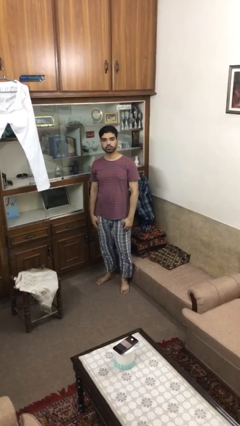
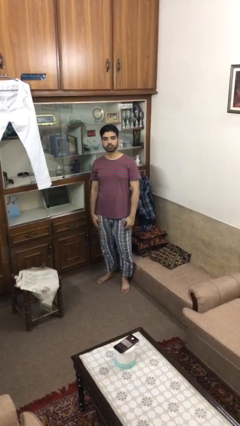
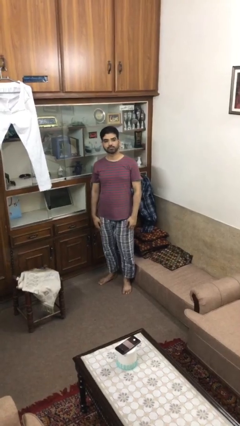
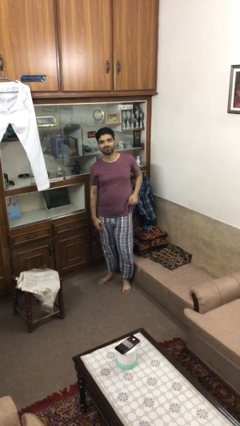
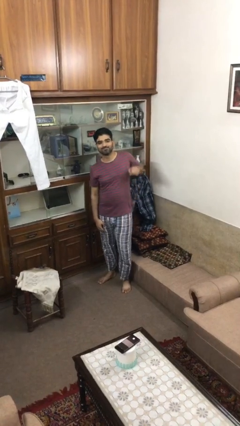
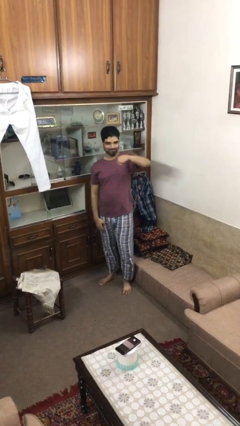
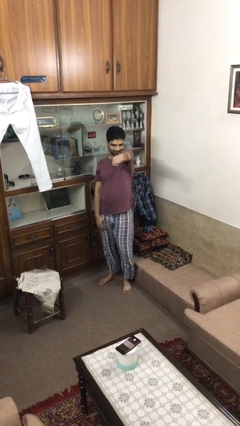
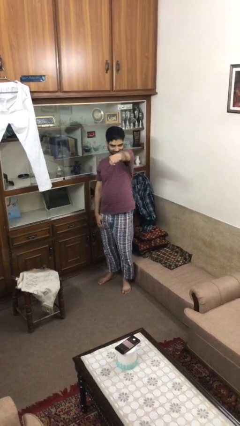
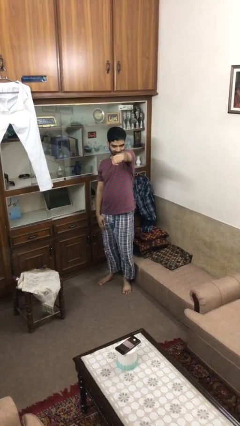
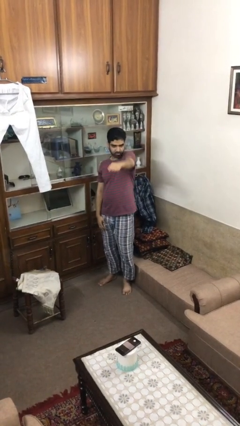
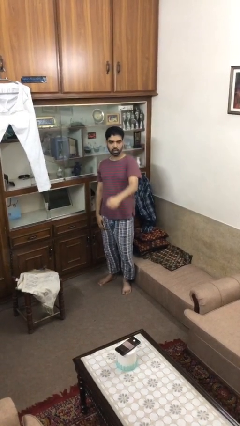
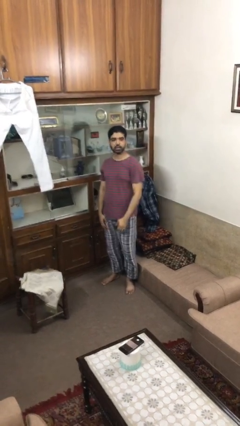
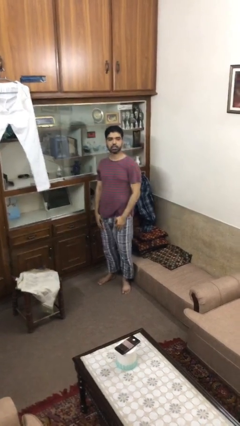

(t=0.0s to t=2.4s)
person punches

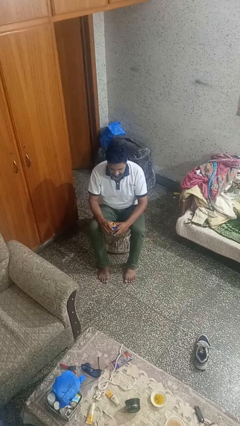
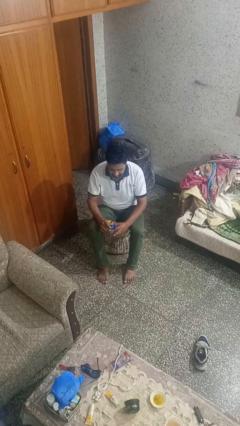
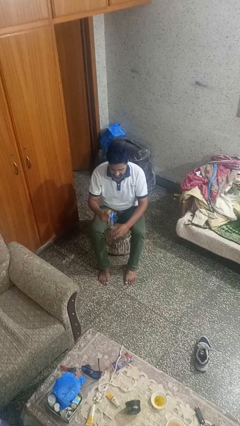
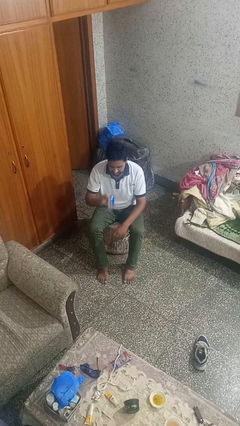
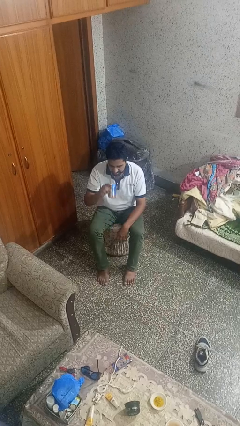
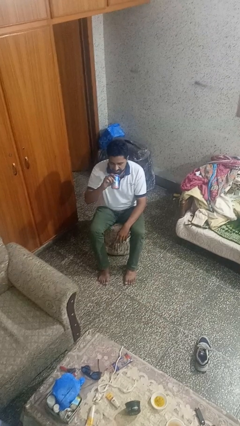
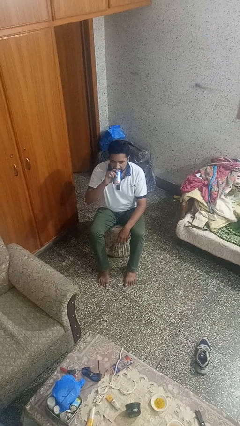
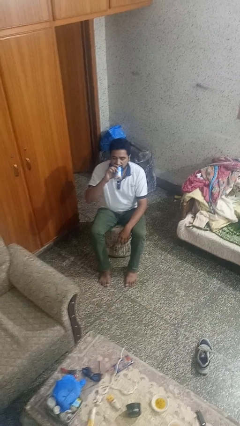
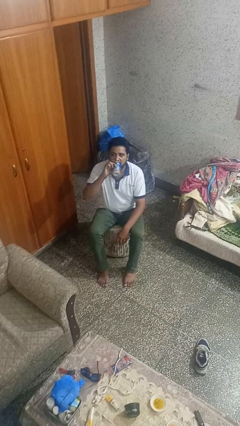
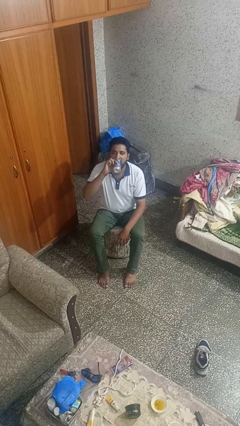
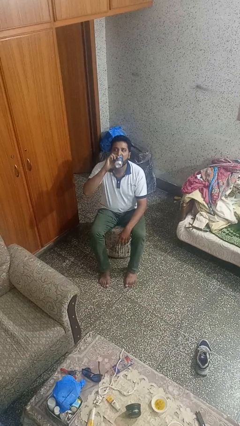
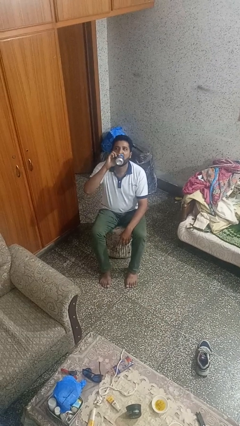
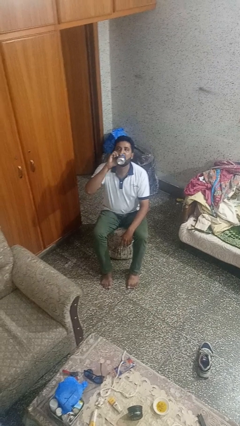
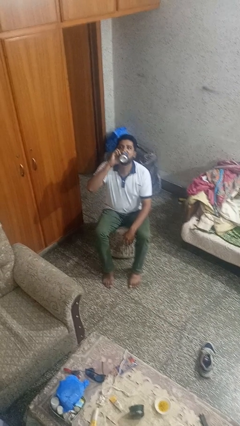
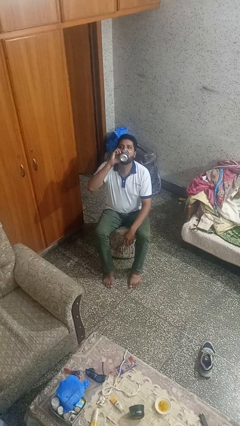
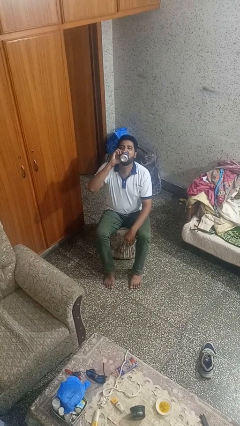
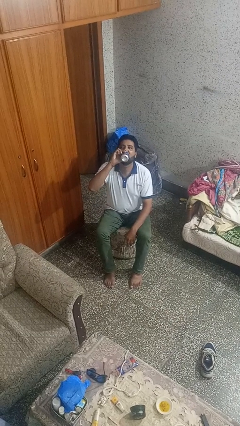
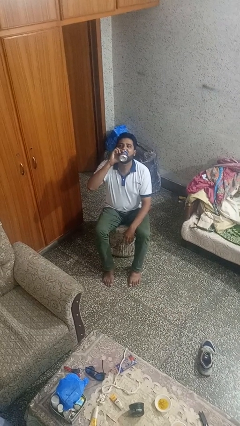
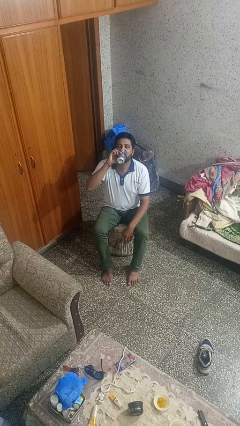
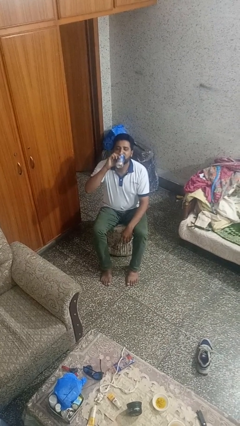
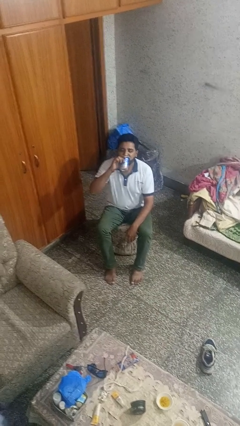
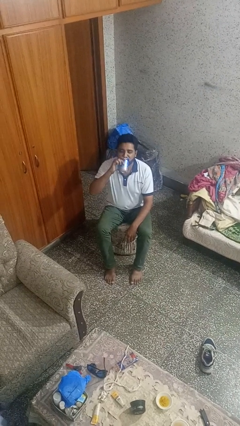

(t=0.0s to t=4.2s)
person drinks from beverage can

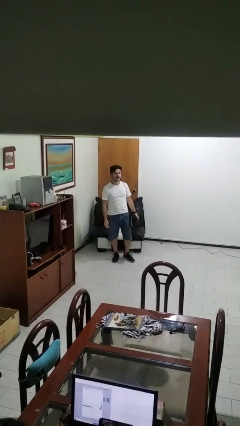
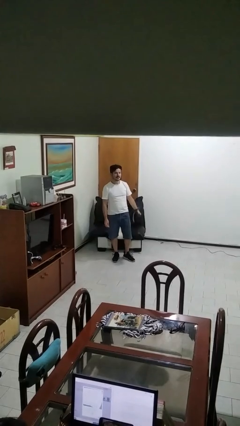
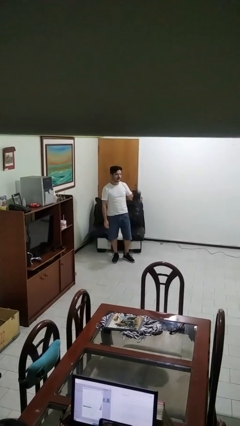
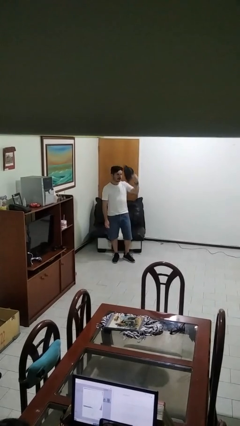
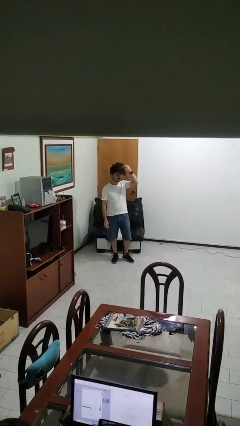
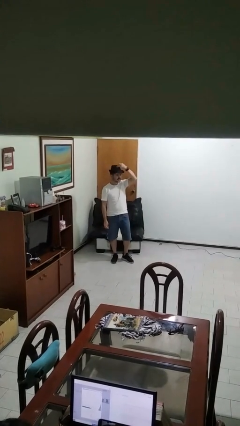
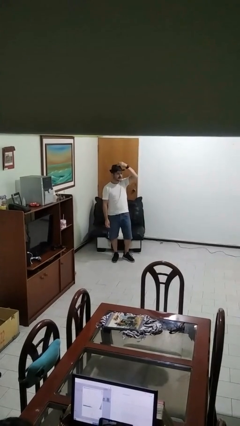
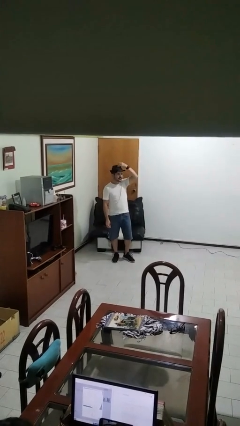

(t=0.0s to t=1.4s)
person puts on hat

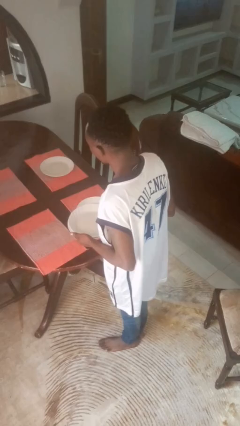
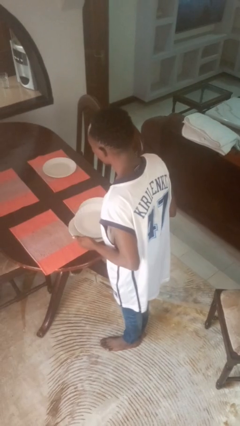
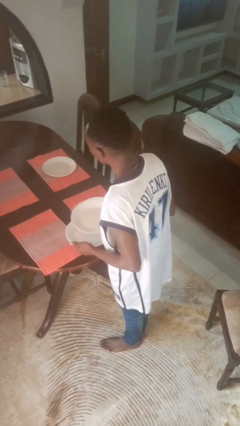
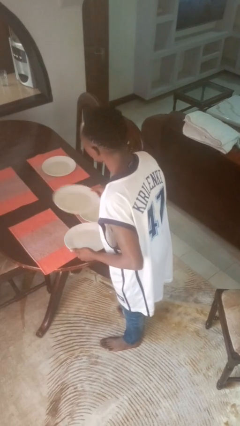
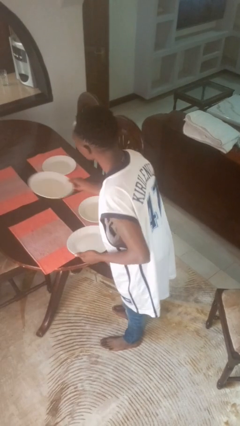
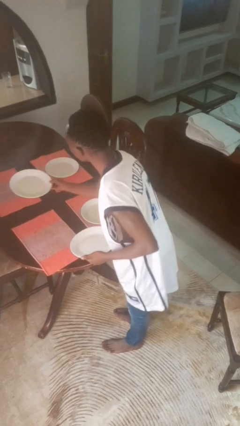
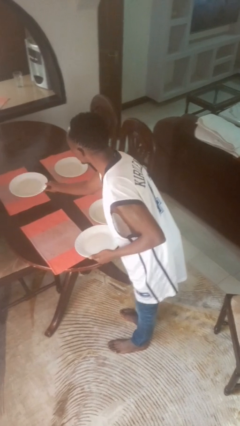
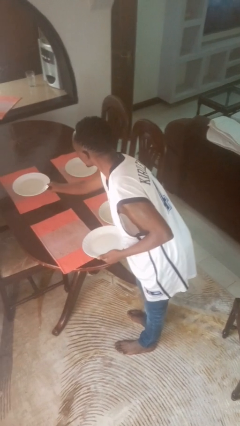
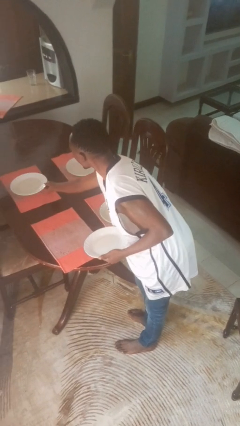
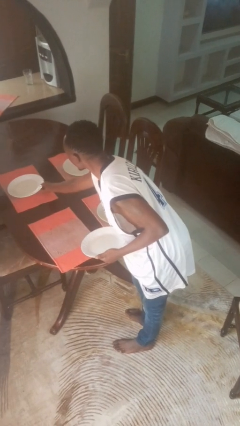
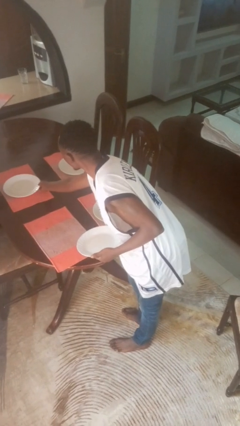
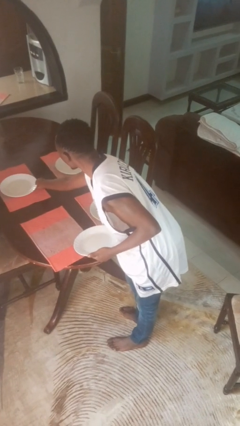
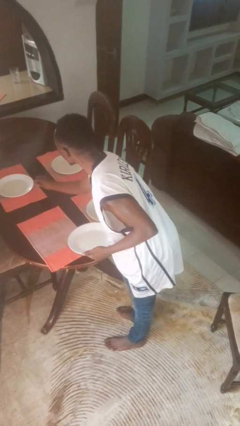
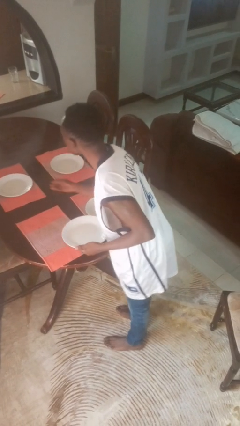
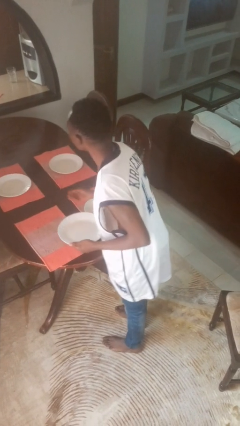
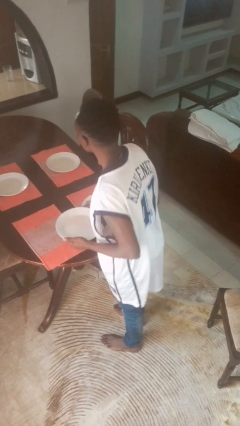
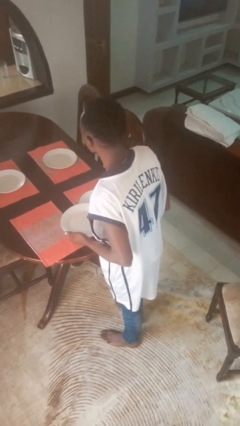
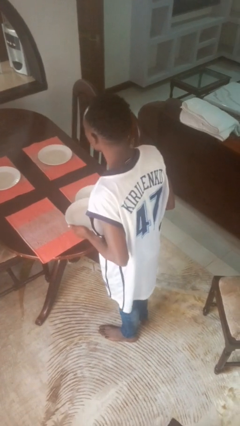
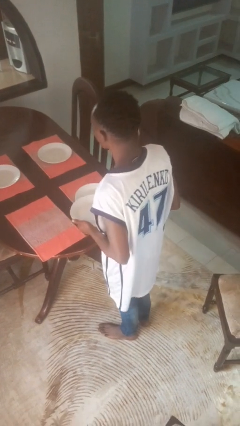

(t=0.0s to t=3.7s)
person sets table

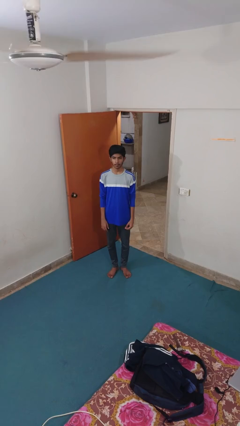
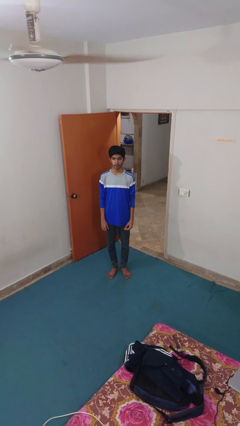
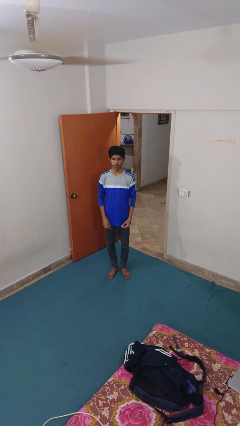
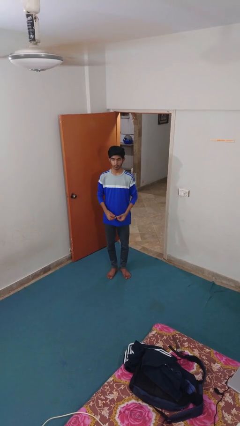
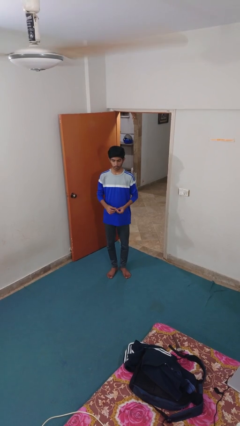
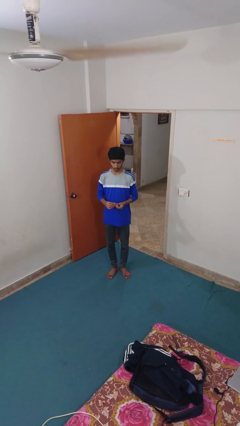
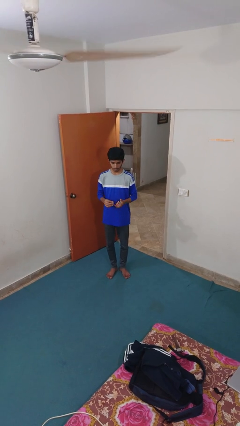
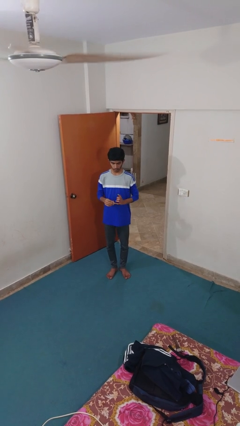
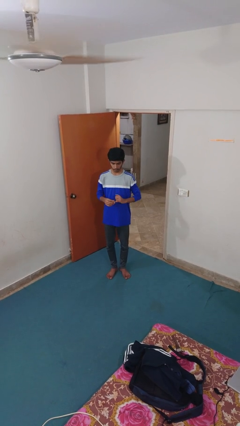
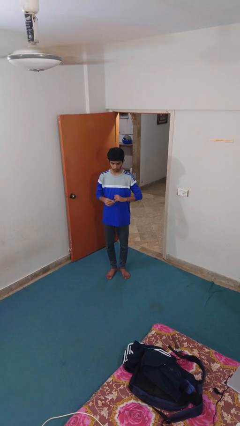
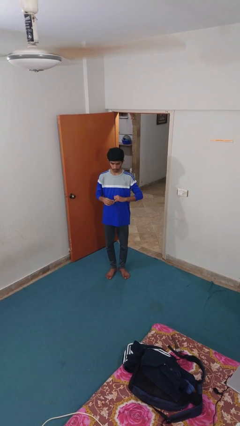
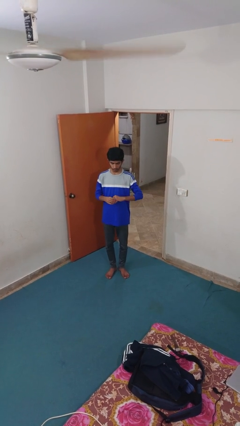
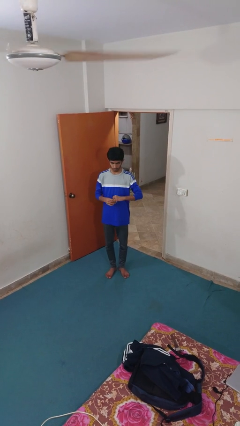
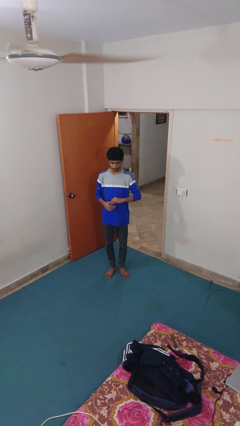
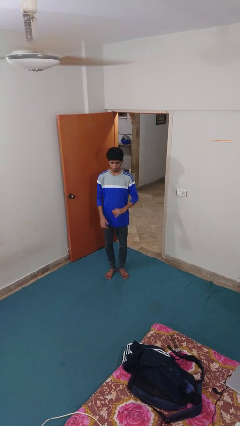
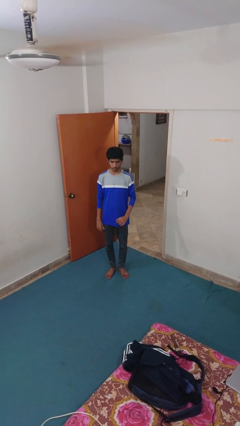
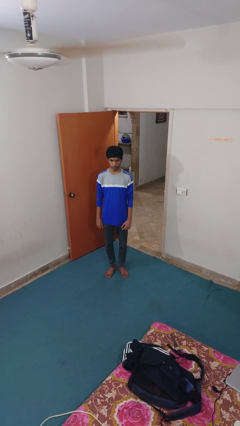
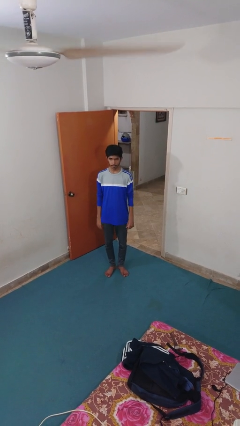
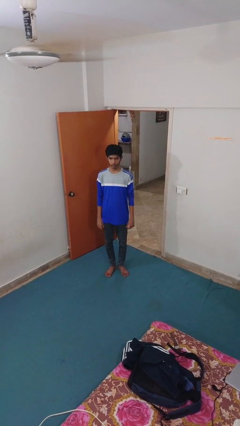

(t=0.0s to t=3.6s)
person puts on ring

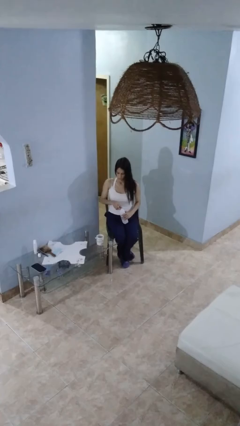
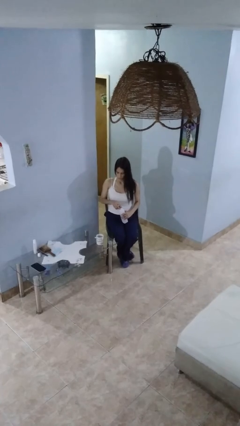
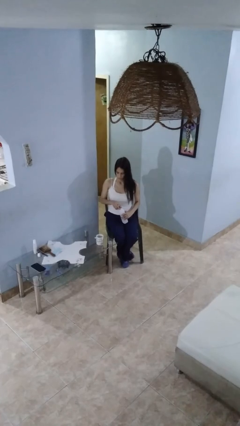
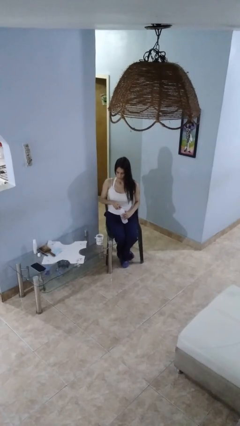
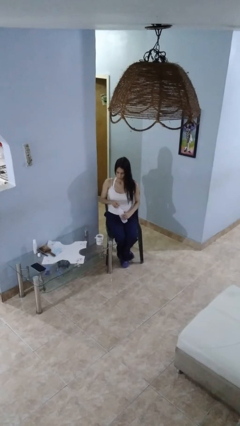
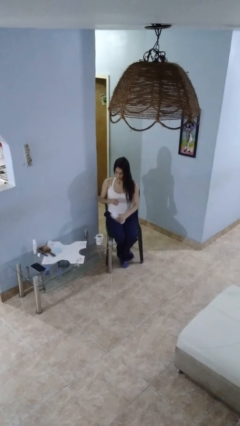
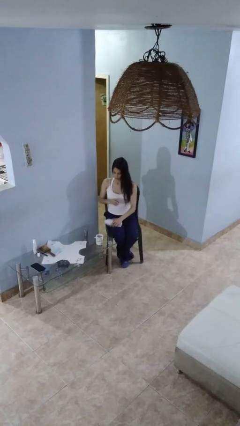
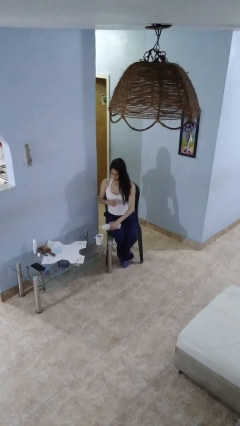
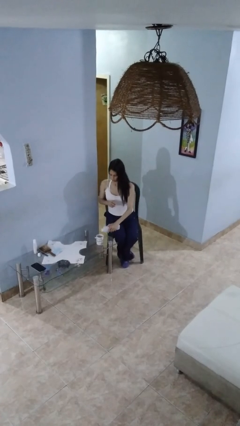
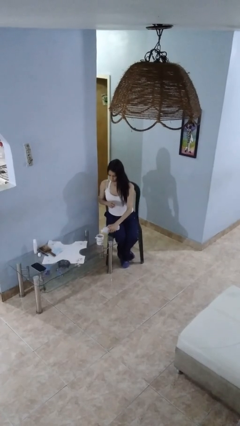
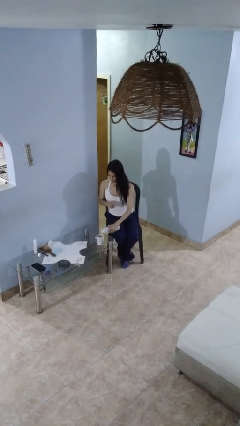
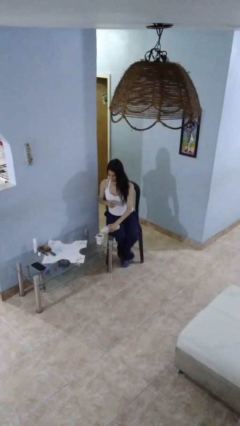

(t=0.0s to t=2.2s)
person pours liquid into cup
